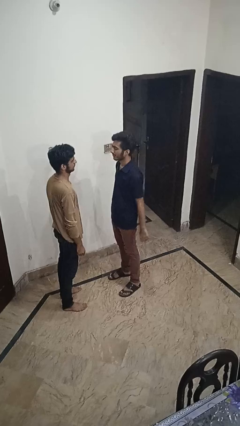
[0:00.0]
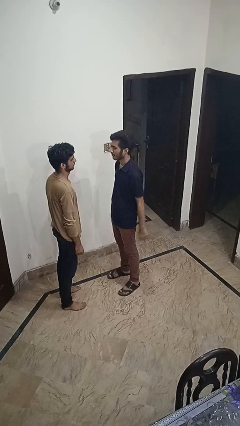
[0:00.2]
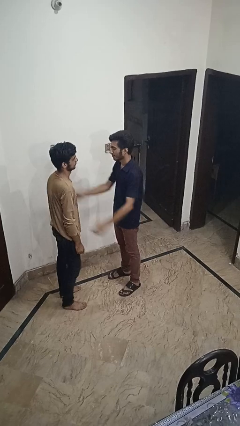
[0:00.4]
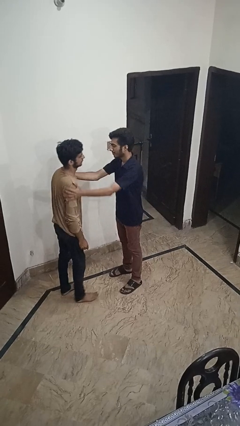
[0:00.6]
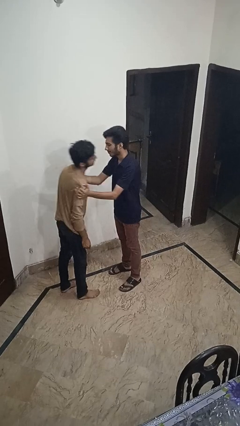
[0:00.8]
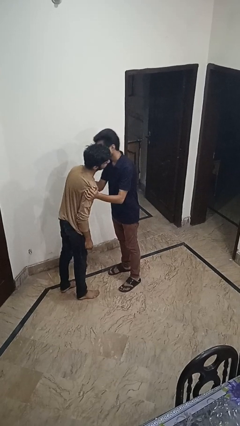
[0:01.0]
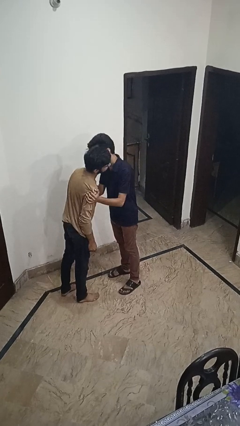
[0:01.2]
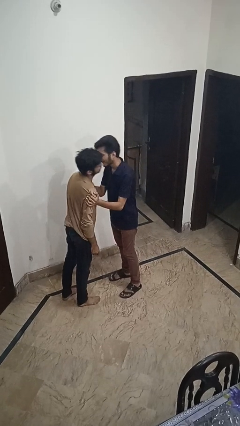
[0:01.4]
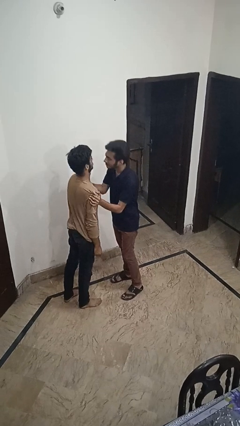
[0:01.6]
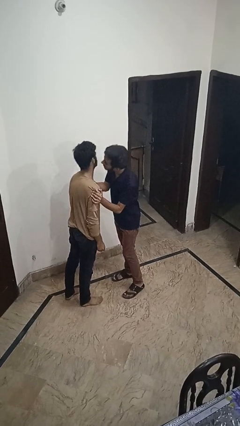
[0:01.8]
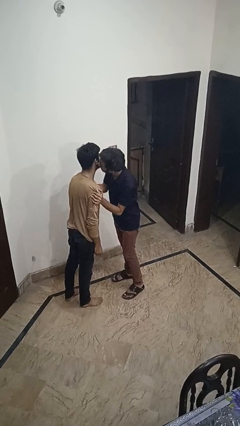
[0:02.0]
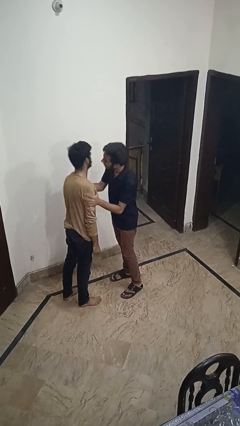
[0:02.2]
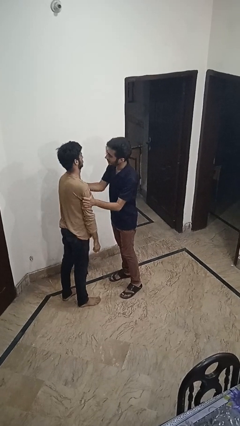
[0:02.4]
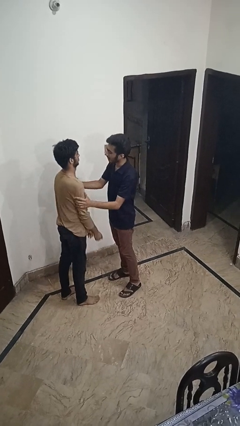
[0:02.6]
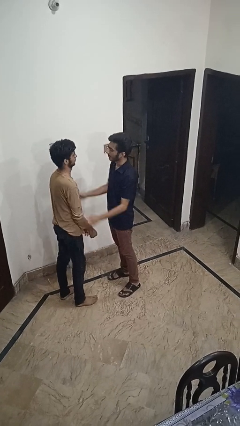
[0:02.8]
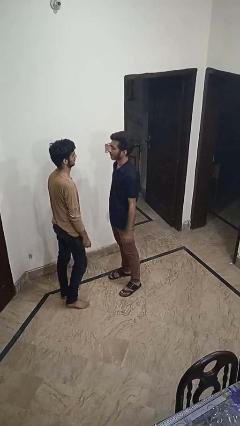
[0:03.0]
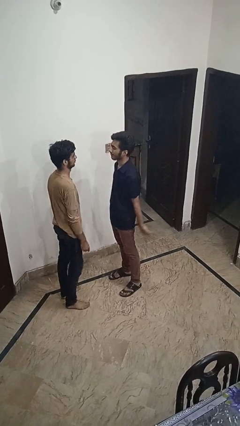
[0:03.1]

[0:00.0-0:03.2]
person kisses cheek of person

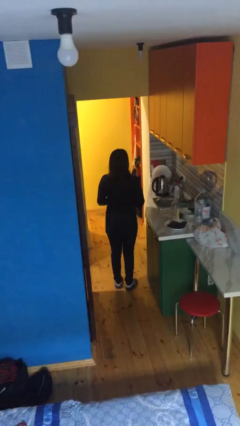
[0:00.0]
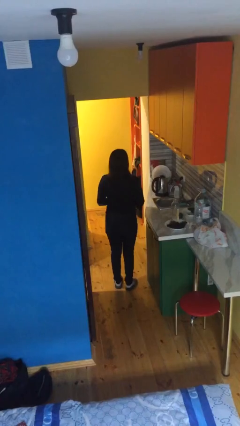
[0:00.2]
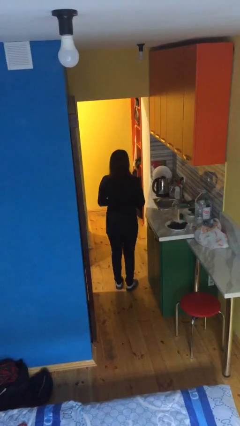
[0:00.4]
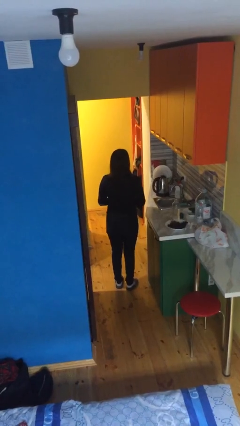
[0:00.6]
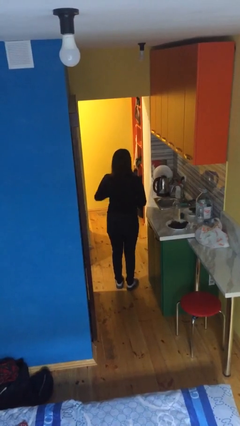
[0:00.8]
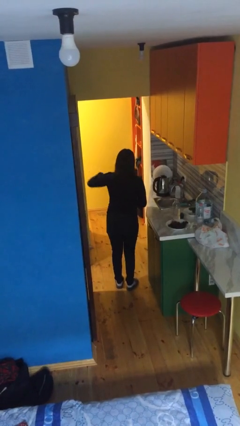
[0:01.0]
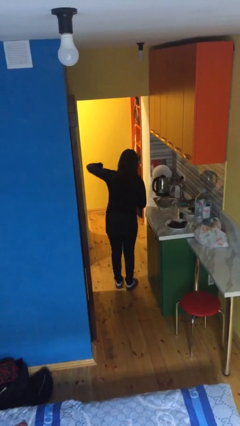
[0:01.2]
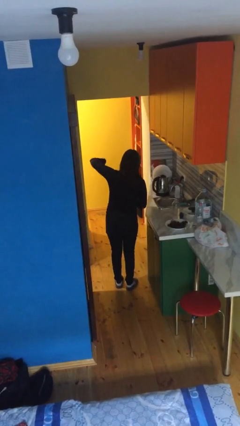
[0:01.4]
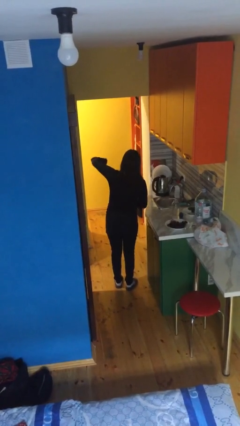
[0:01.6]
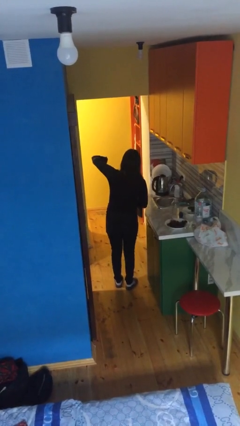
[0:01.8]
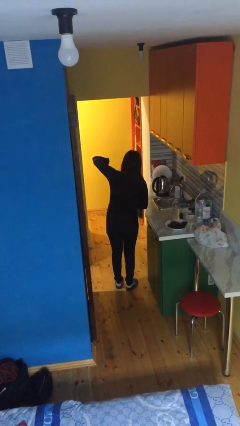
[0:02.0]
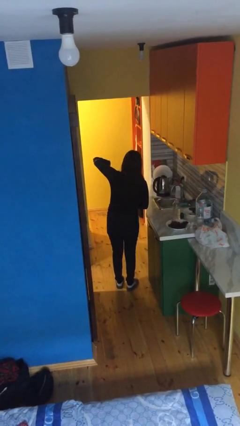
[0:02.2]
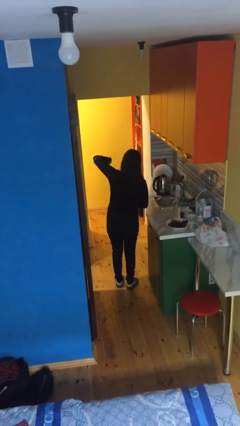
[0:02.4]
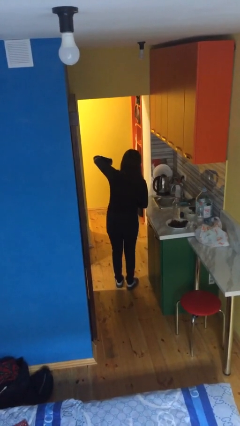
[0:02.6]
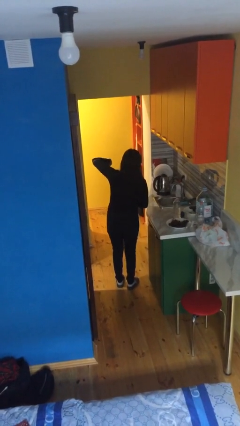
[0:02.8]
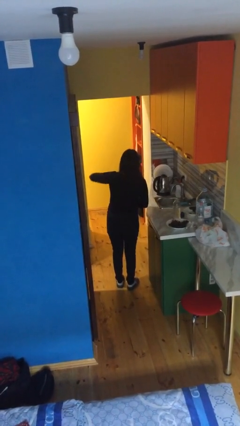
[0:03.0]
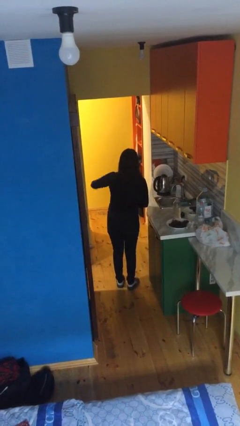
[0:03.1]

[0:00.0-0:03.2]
person gestures thumbs down

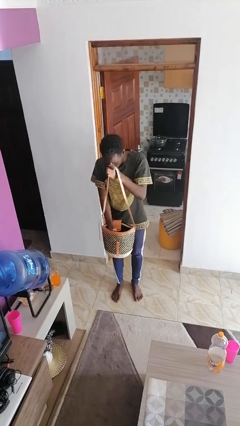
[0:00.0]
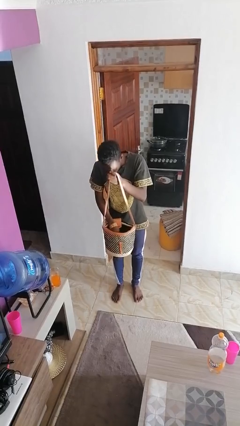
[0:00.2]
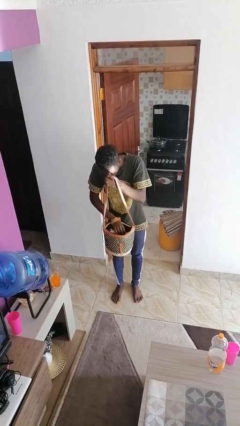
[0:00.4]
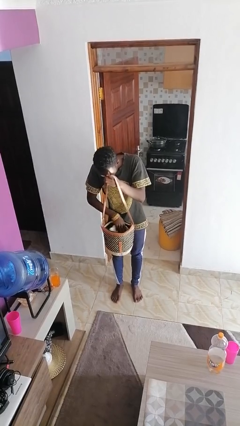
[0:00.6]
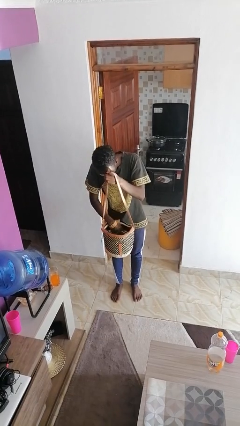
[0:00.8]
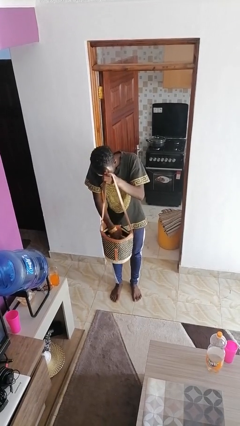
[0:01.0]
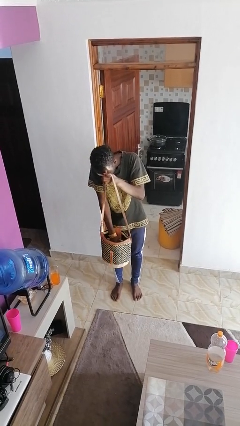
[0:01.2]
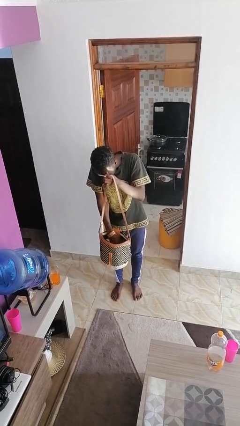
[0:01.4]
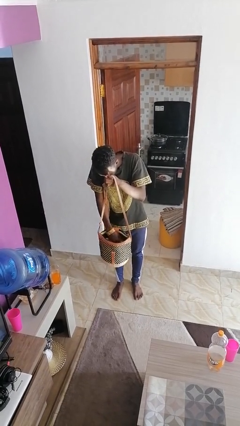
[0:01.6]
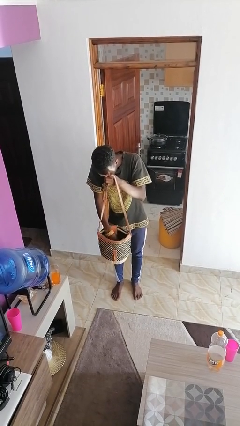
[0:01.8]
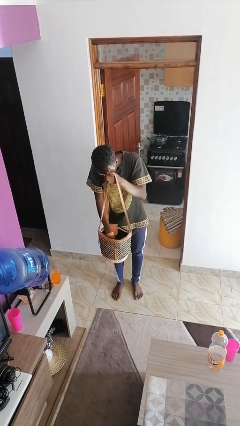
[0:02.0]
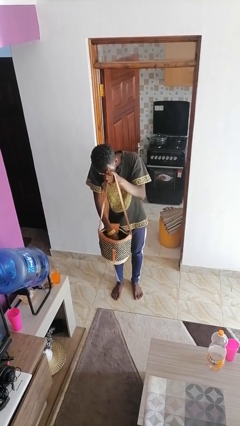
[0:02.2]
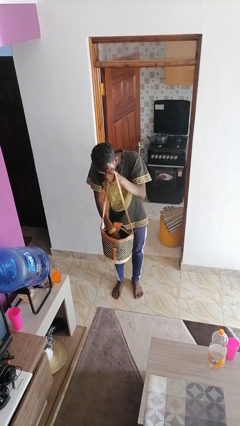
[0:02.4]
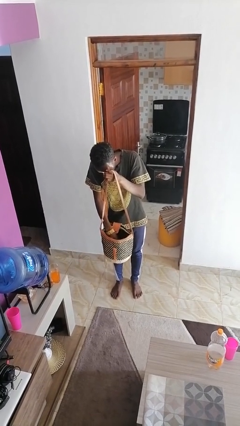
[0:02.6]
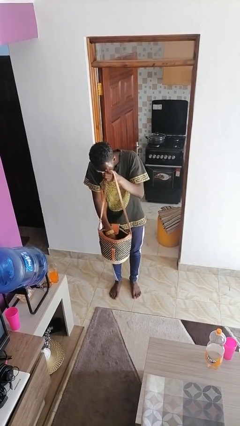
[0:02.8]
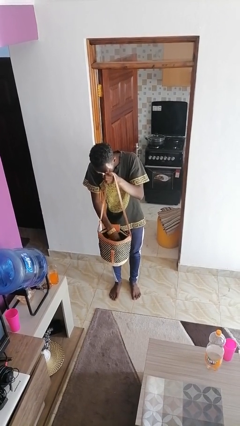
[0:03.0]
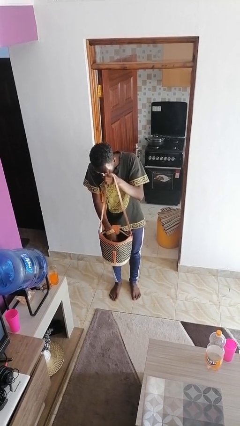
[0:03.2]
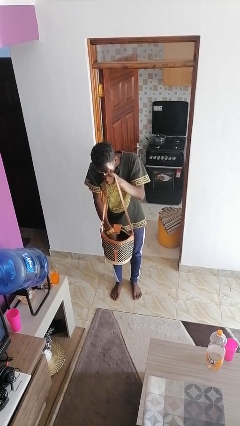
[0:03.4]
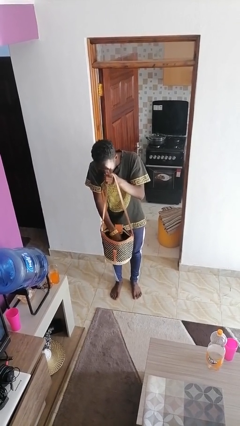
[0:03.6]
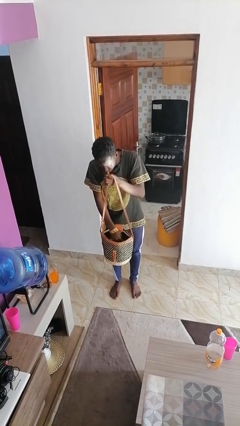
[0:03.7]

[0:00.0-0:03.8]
person searches in purse

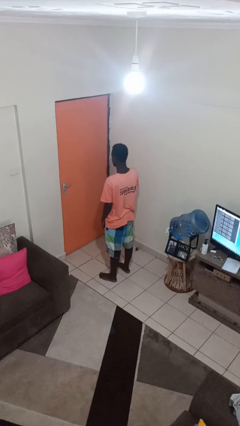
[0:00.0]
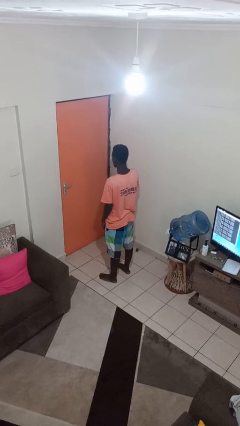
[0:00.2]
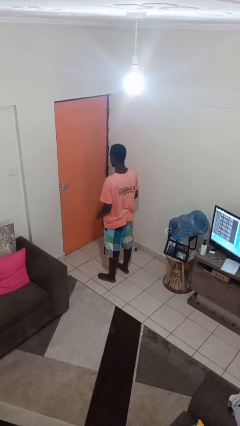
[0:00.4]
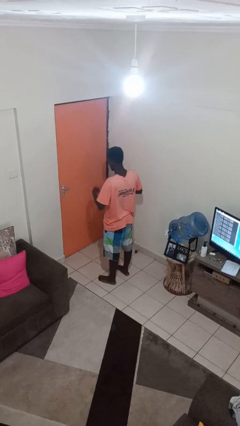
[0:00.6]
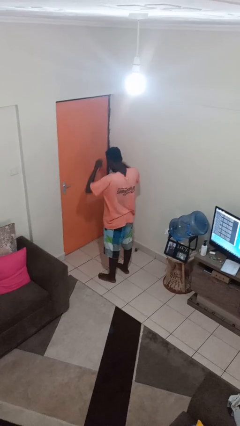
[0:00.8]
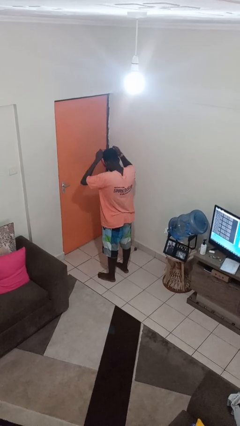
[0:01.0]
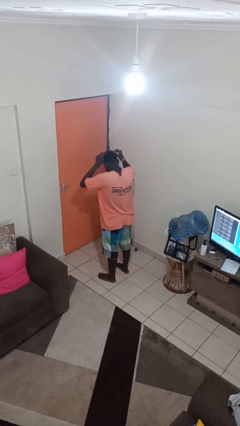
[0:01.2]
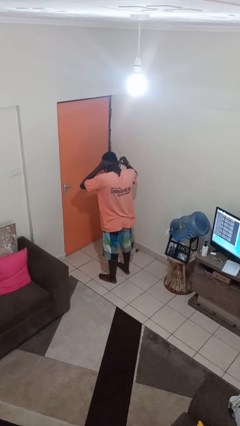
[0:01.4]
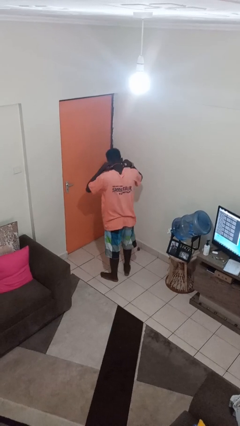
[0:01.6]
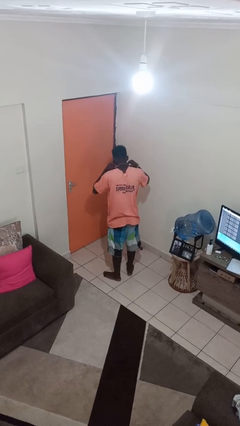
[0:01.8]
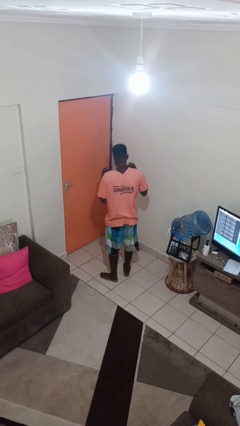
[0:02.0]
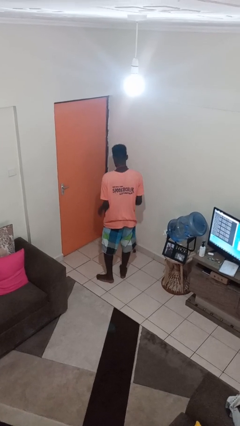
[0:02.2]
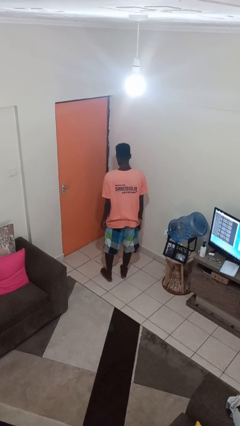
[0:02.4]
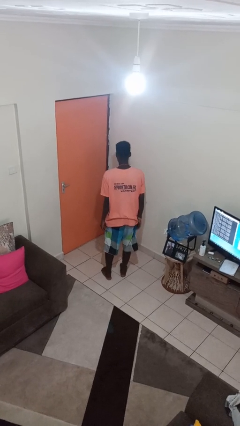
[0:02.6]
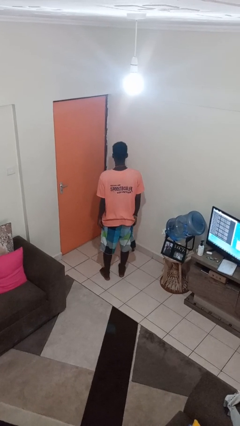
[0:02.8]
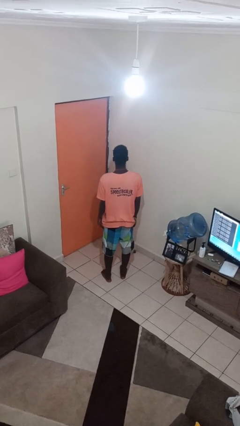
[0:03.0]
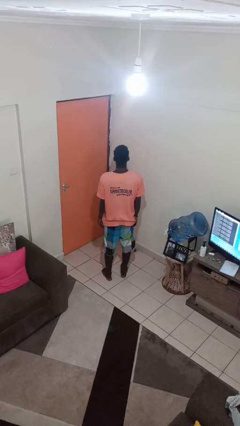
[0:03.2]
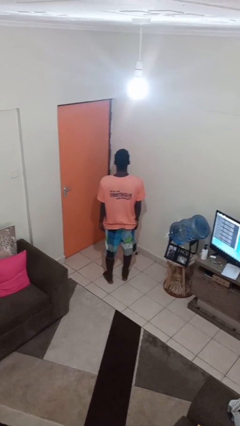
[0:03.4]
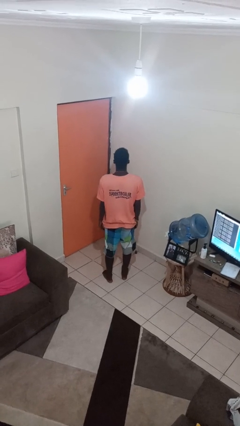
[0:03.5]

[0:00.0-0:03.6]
person puts on necklace

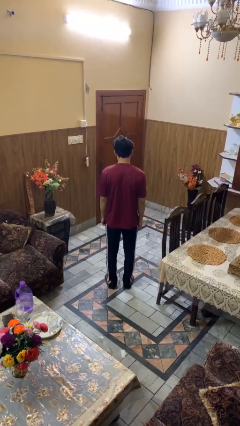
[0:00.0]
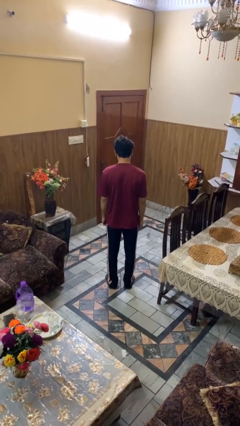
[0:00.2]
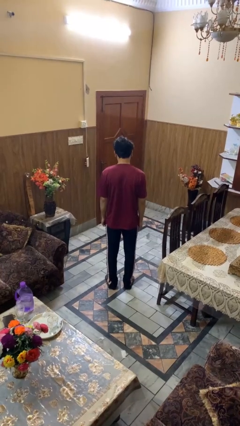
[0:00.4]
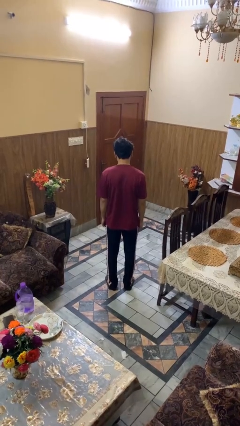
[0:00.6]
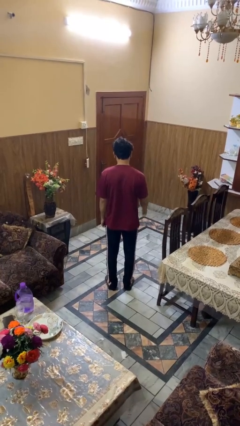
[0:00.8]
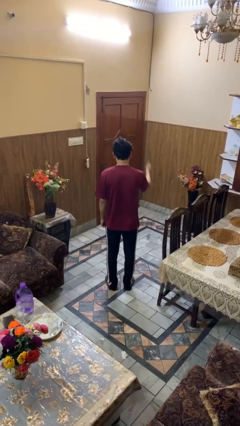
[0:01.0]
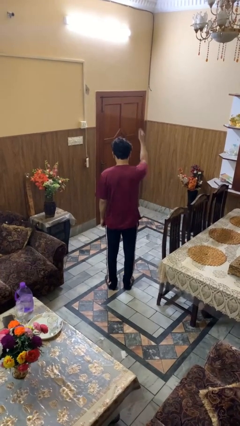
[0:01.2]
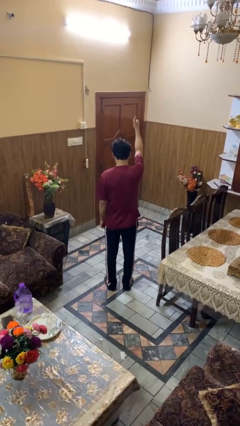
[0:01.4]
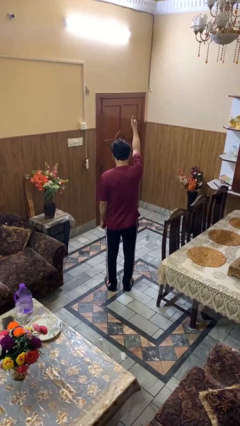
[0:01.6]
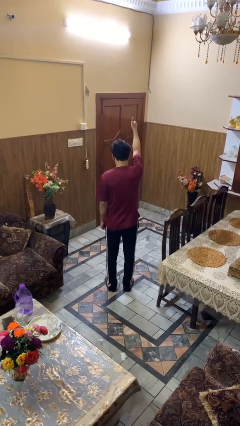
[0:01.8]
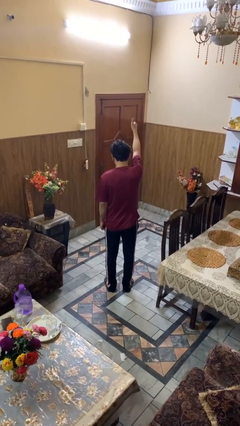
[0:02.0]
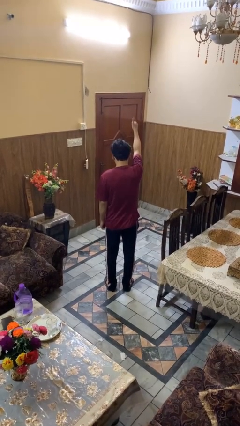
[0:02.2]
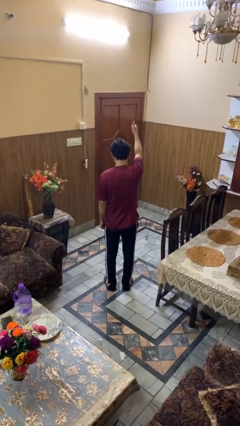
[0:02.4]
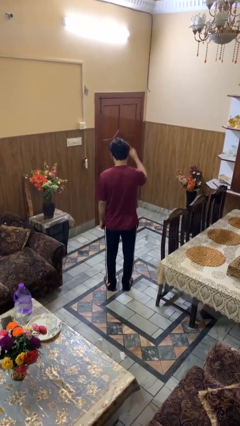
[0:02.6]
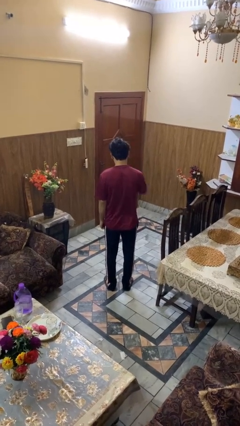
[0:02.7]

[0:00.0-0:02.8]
person gestures thumbs up

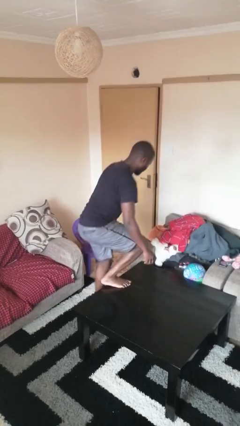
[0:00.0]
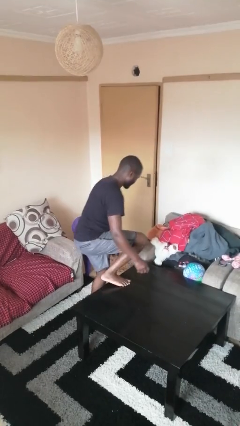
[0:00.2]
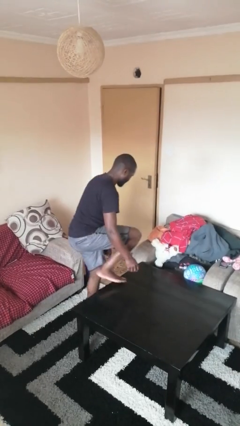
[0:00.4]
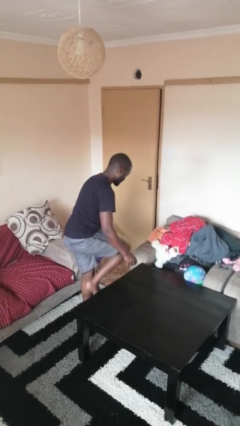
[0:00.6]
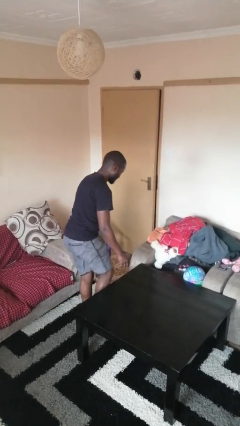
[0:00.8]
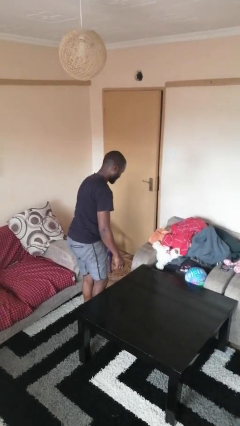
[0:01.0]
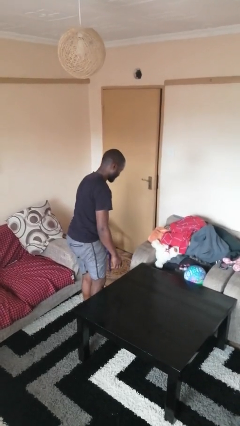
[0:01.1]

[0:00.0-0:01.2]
person climbs off table
